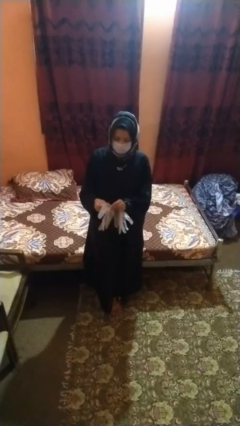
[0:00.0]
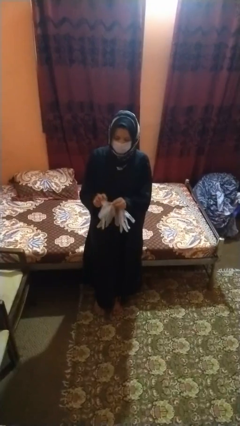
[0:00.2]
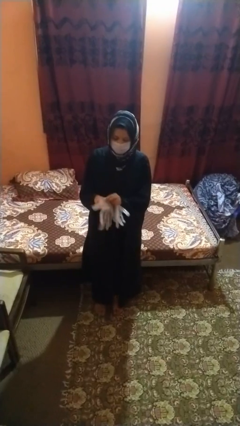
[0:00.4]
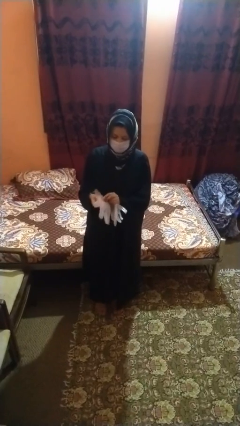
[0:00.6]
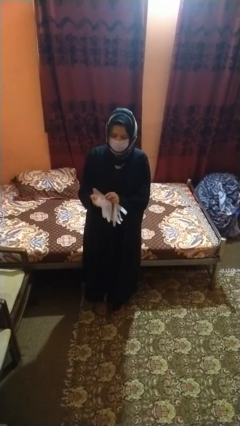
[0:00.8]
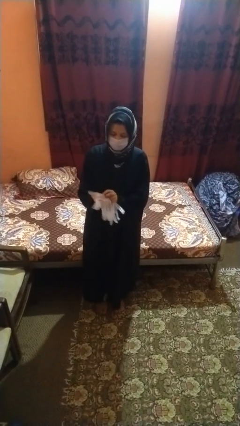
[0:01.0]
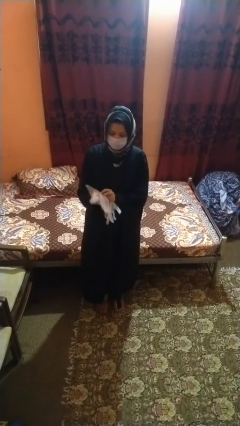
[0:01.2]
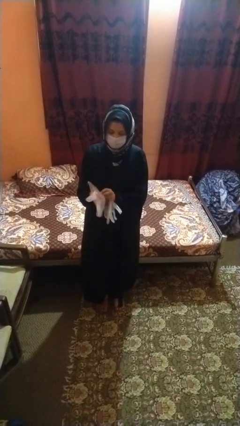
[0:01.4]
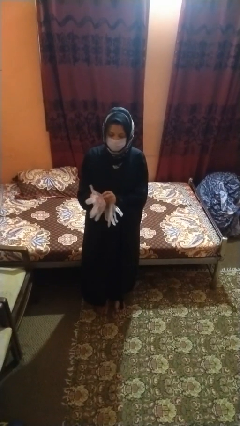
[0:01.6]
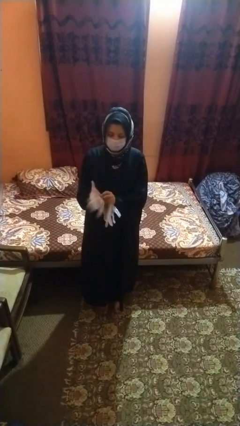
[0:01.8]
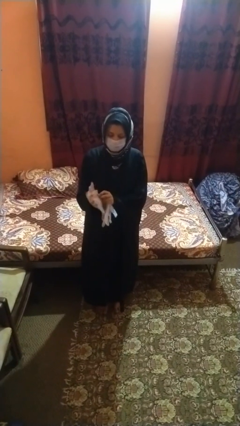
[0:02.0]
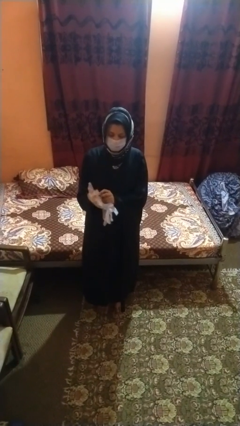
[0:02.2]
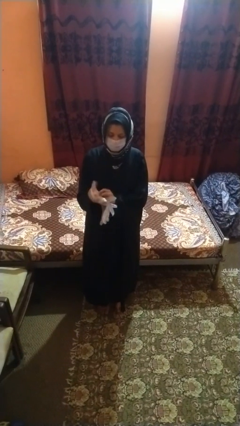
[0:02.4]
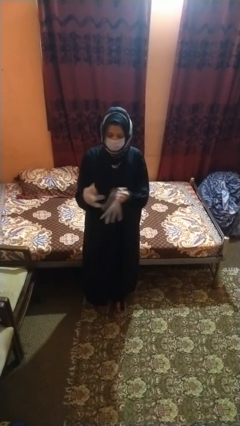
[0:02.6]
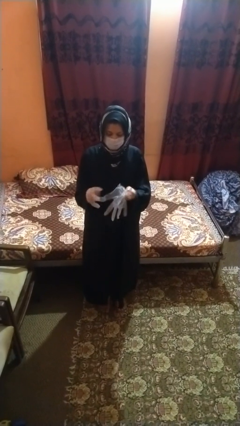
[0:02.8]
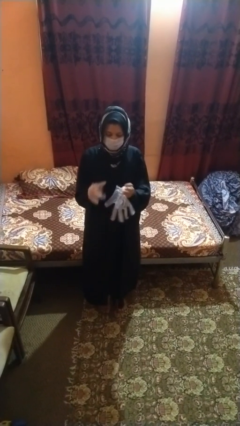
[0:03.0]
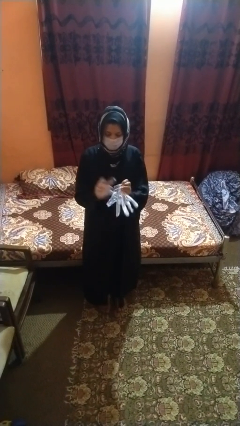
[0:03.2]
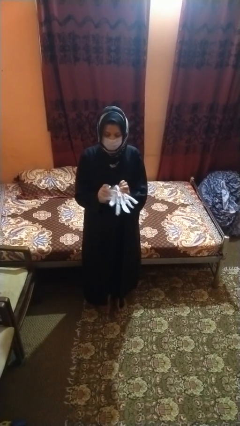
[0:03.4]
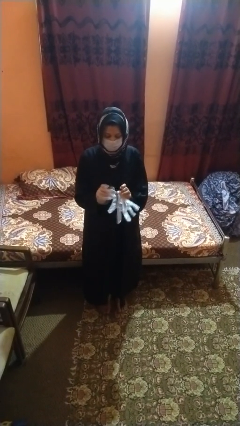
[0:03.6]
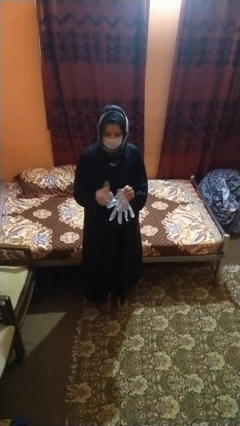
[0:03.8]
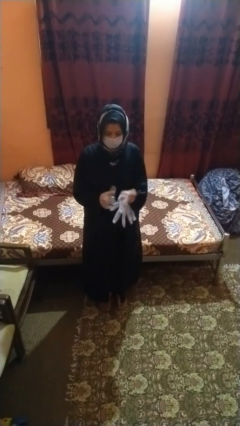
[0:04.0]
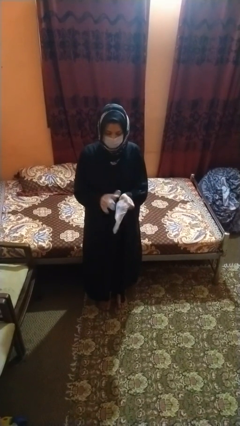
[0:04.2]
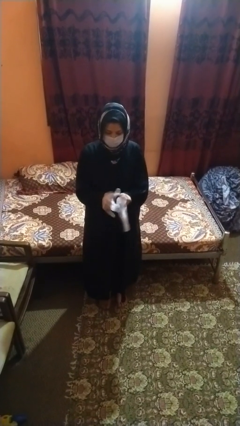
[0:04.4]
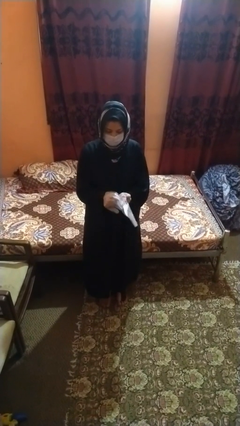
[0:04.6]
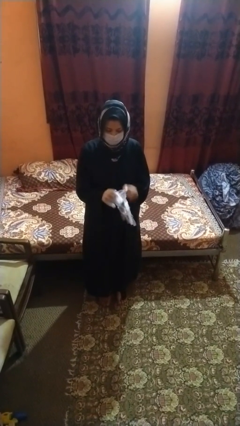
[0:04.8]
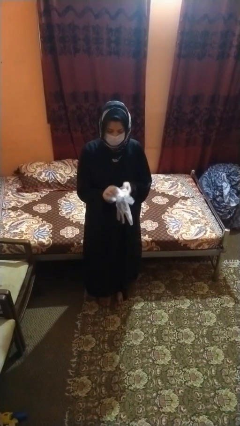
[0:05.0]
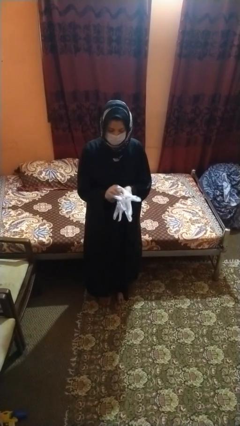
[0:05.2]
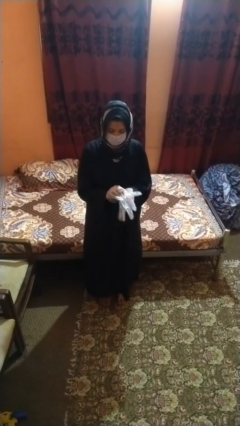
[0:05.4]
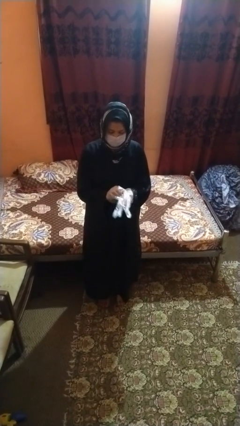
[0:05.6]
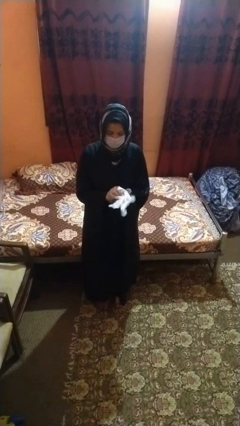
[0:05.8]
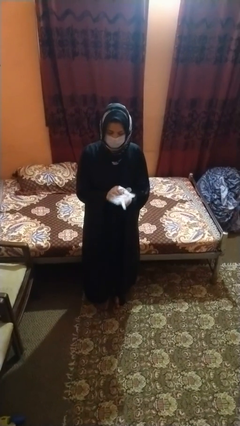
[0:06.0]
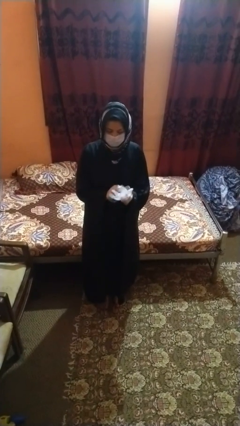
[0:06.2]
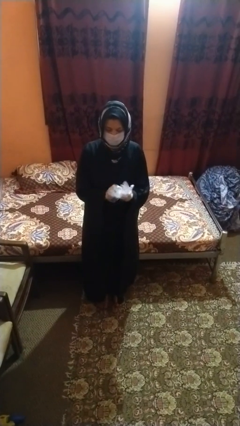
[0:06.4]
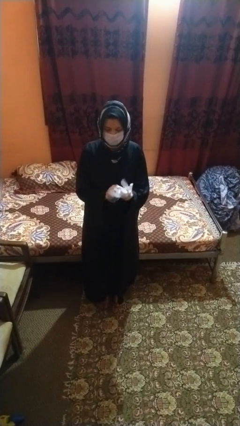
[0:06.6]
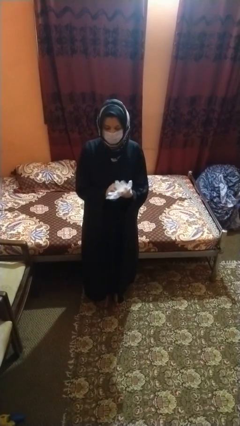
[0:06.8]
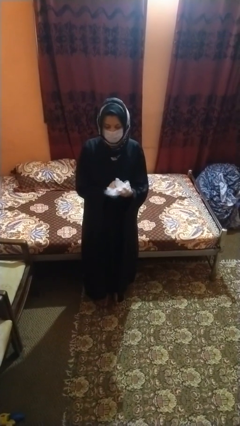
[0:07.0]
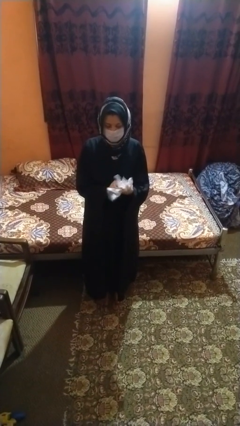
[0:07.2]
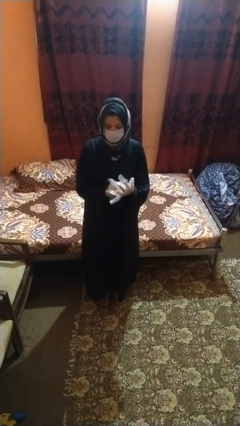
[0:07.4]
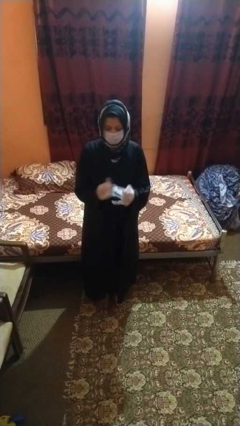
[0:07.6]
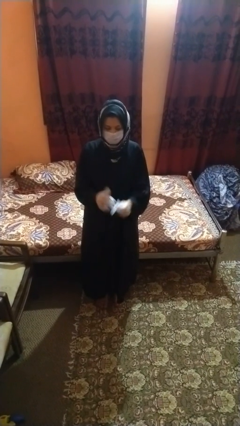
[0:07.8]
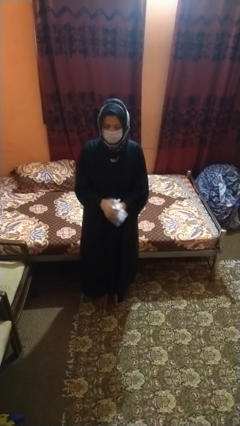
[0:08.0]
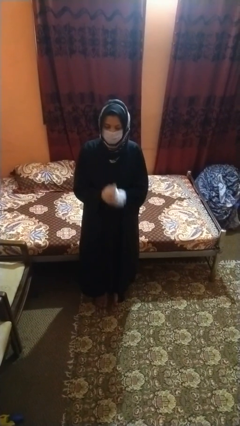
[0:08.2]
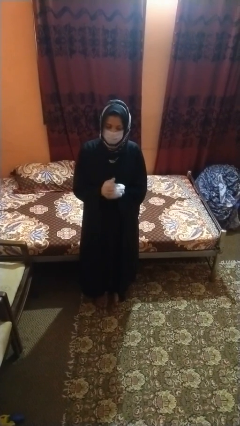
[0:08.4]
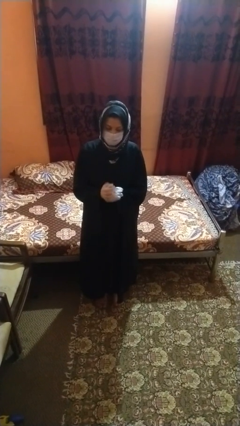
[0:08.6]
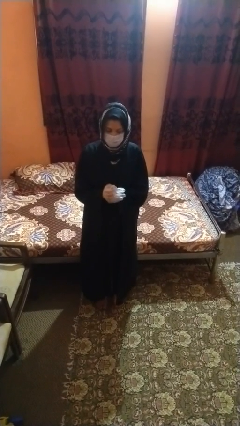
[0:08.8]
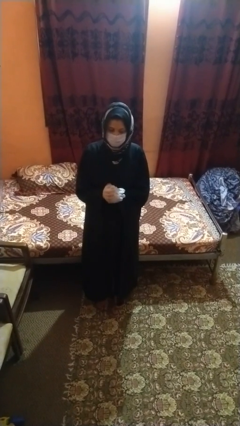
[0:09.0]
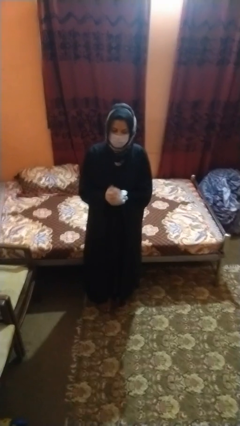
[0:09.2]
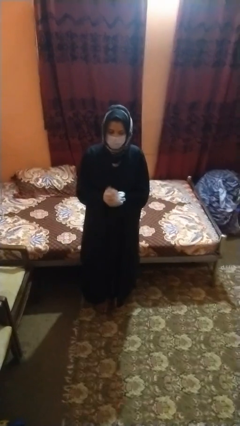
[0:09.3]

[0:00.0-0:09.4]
person puts on gloves

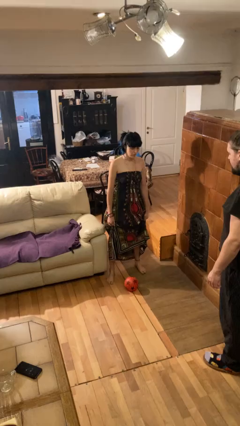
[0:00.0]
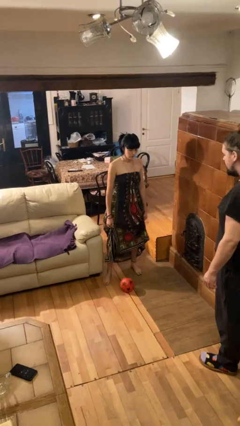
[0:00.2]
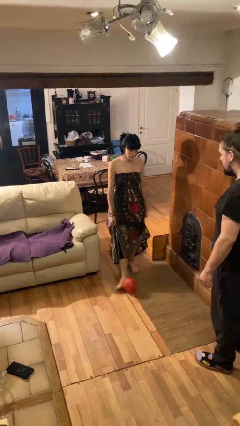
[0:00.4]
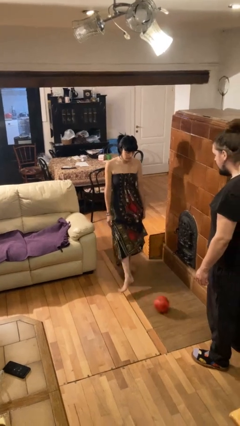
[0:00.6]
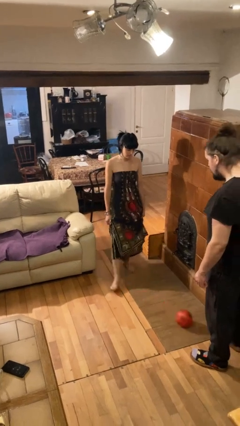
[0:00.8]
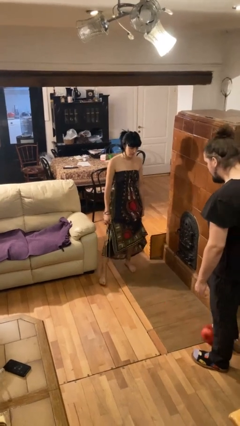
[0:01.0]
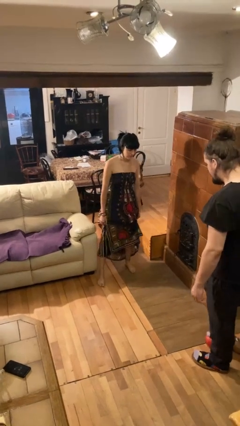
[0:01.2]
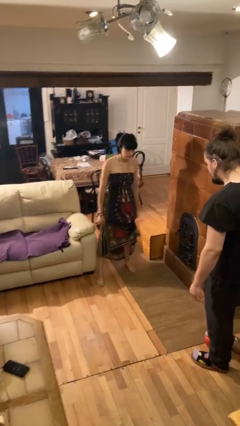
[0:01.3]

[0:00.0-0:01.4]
person kicks object to person

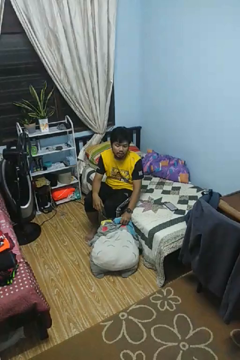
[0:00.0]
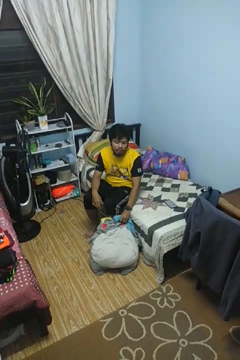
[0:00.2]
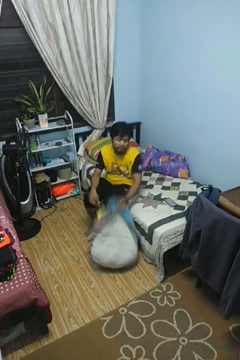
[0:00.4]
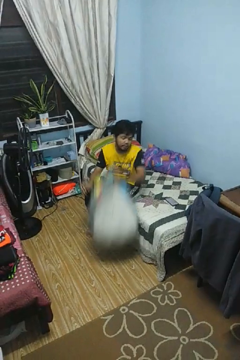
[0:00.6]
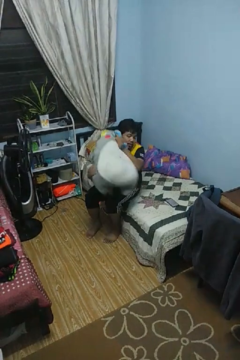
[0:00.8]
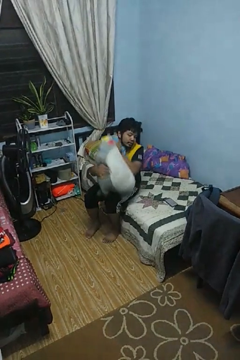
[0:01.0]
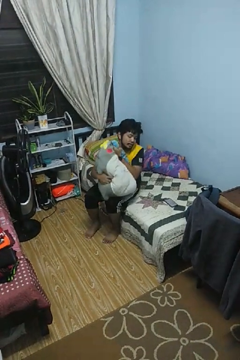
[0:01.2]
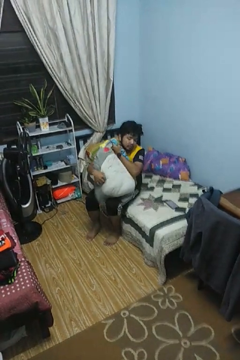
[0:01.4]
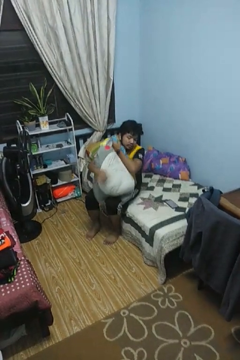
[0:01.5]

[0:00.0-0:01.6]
person hugs stuffed animal

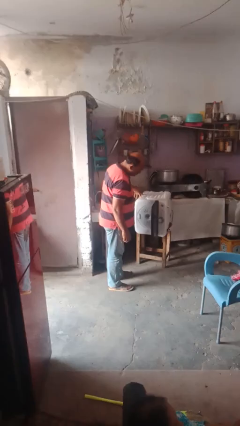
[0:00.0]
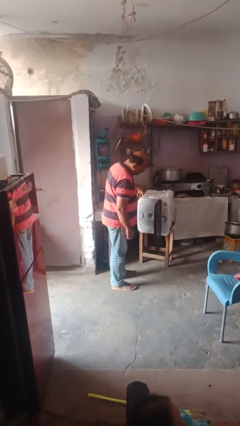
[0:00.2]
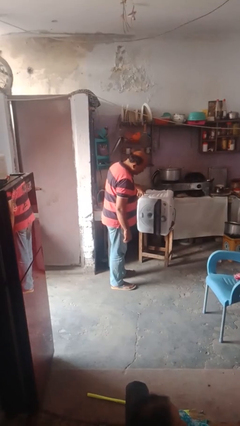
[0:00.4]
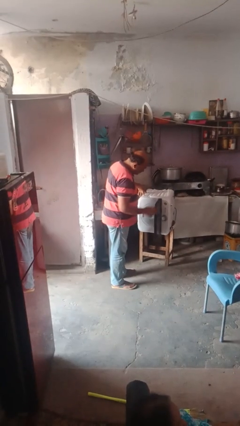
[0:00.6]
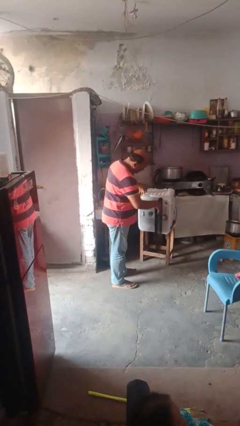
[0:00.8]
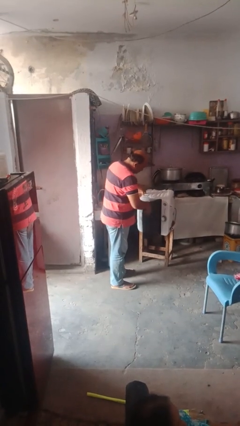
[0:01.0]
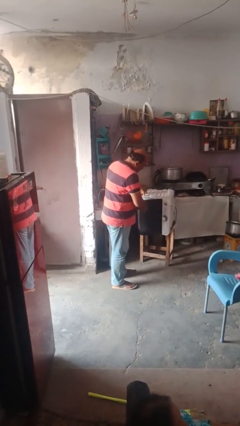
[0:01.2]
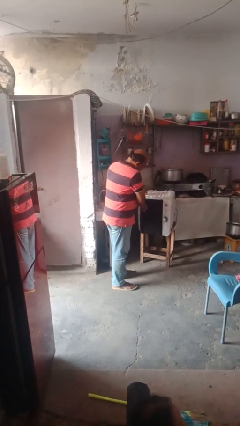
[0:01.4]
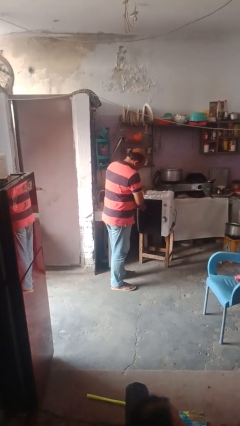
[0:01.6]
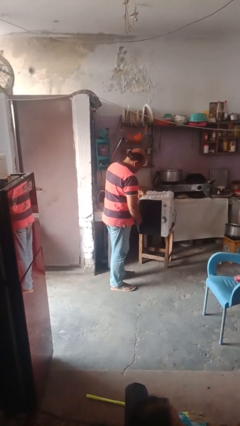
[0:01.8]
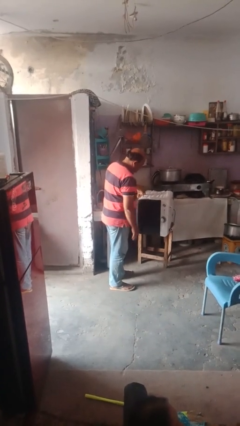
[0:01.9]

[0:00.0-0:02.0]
person closes dishwasher

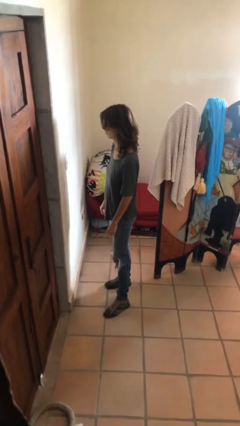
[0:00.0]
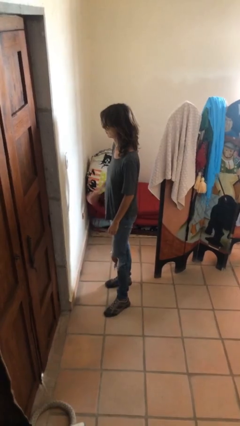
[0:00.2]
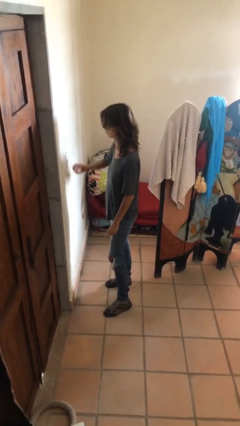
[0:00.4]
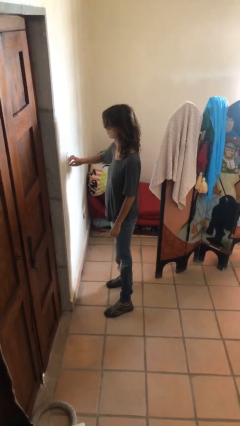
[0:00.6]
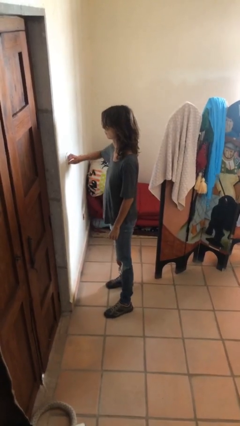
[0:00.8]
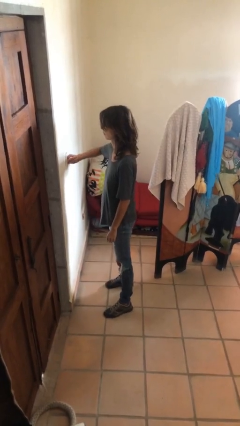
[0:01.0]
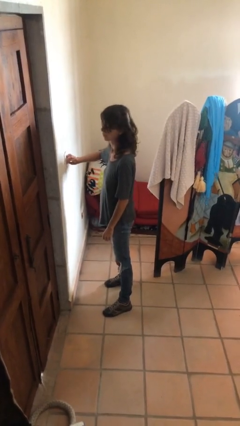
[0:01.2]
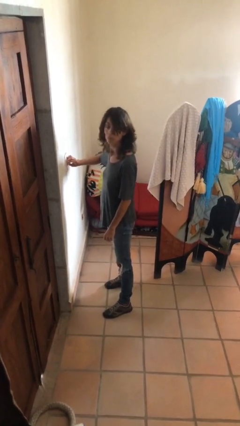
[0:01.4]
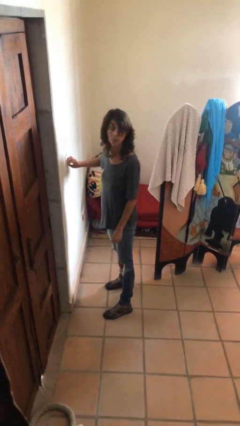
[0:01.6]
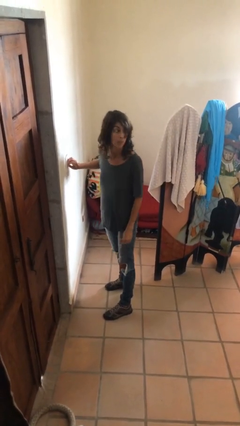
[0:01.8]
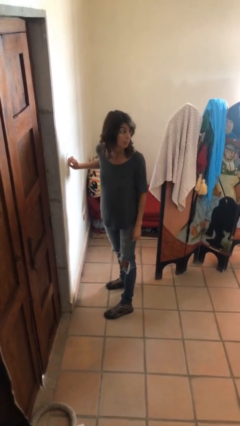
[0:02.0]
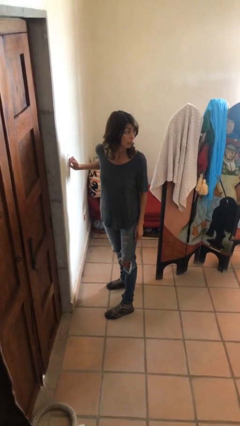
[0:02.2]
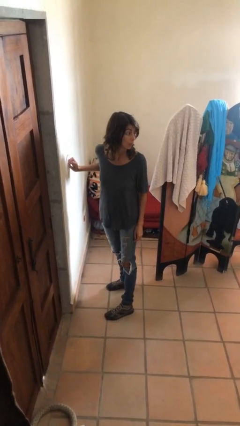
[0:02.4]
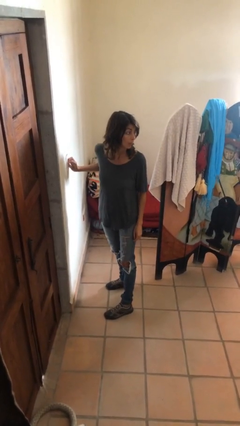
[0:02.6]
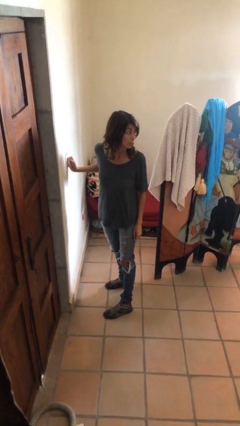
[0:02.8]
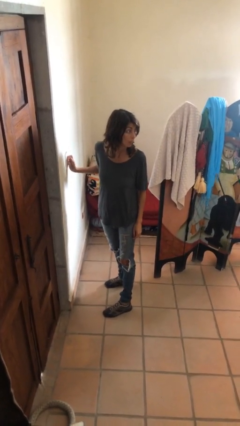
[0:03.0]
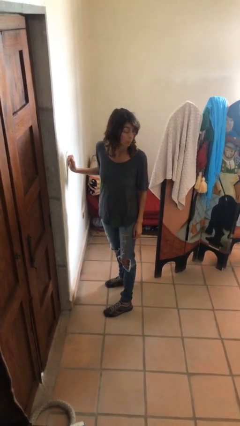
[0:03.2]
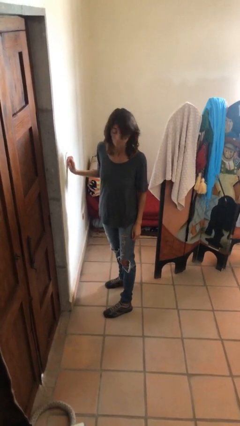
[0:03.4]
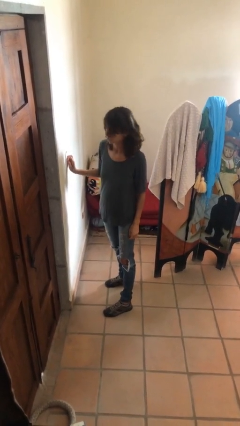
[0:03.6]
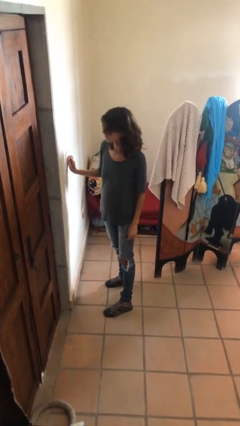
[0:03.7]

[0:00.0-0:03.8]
person adjusts thermostat
